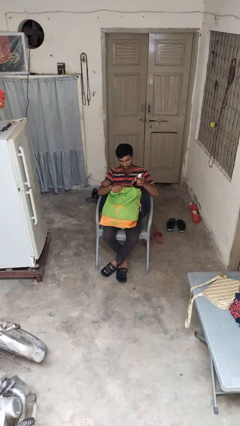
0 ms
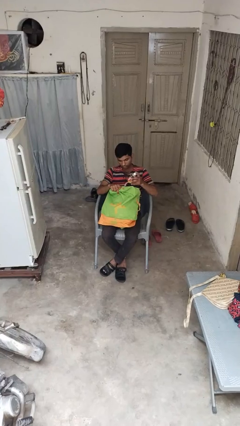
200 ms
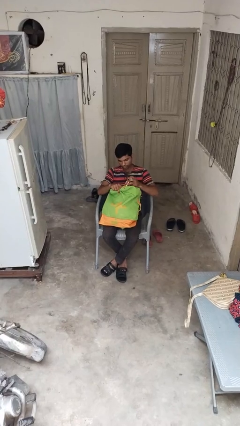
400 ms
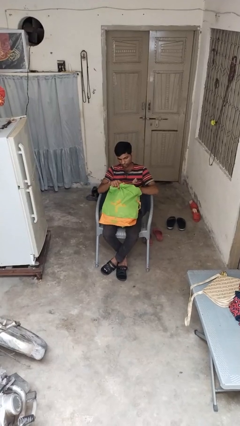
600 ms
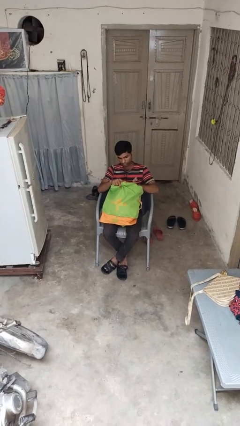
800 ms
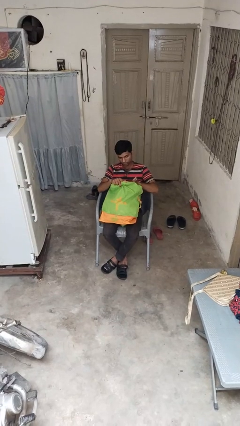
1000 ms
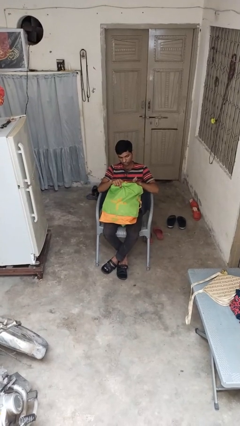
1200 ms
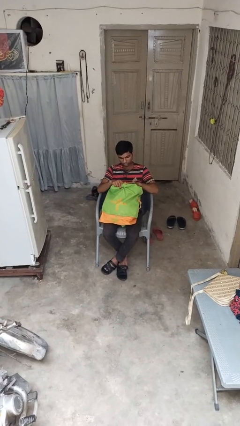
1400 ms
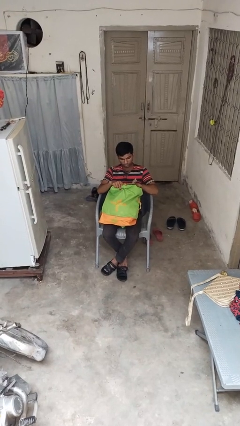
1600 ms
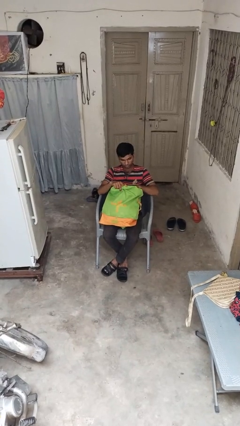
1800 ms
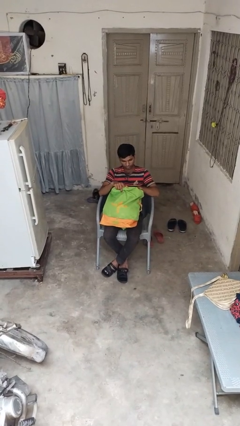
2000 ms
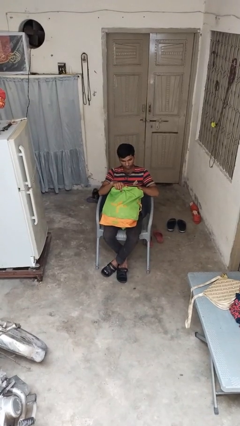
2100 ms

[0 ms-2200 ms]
person puts object into backpack

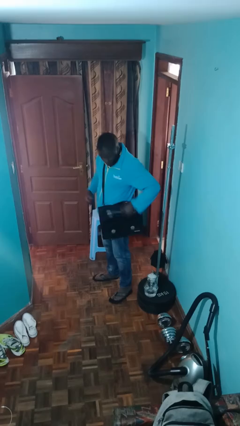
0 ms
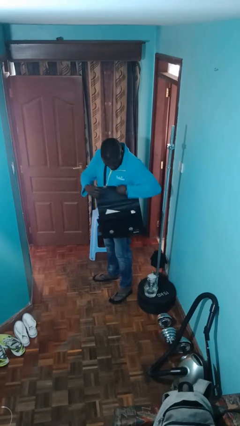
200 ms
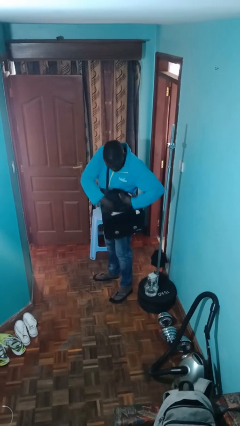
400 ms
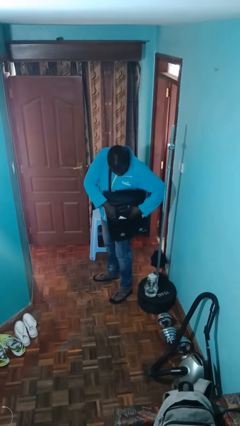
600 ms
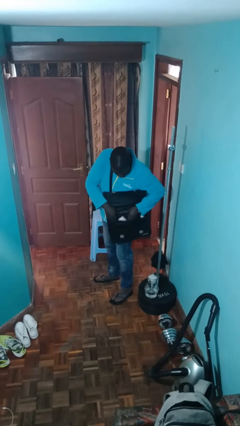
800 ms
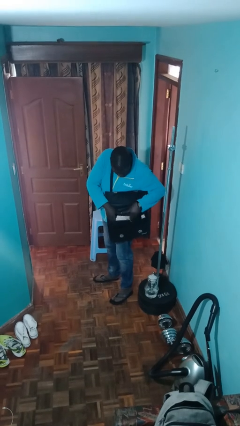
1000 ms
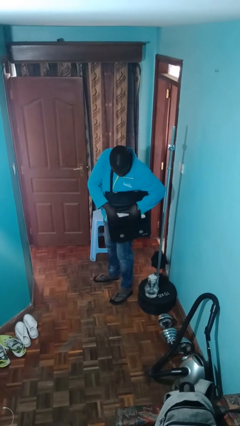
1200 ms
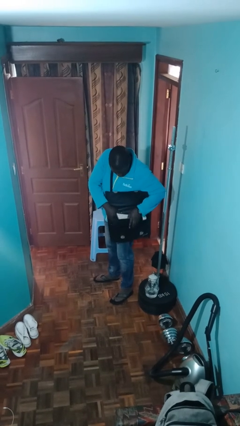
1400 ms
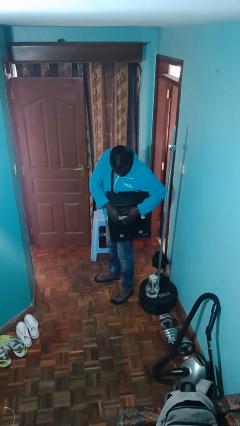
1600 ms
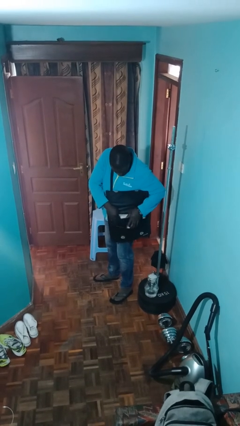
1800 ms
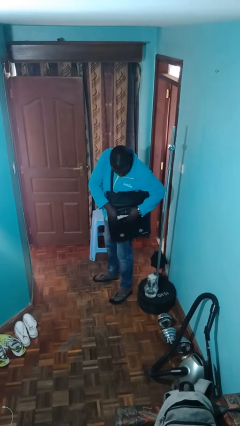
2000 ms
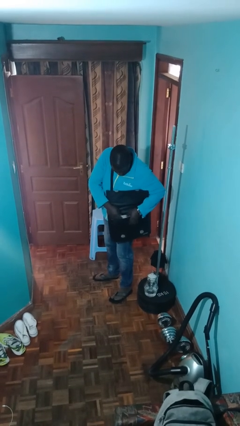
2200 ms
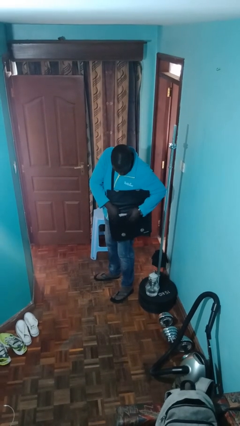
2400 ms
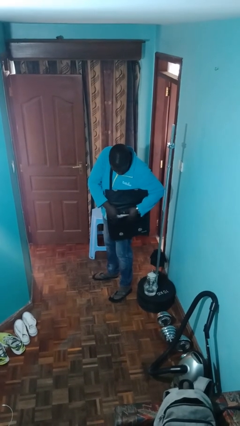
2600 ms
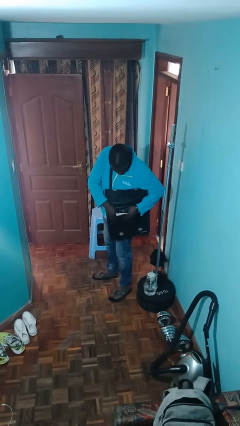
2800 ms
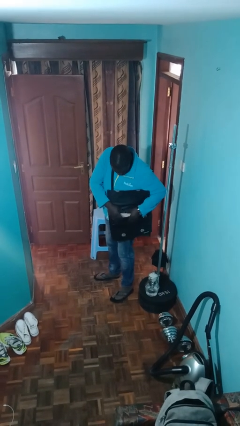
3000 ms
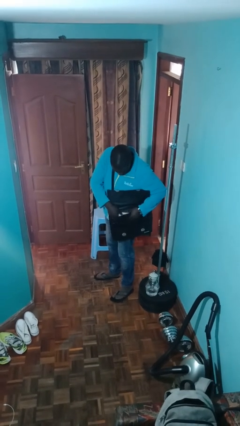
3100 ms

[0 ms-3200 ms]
person searches in purse

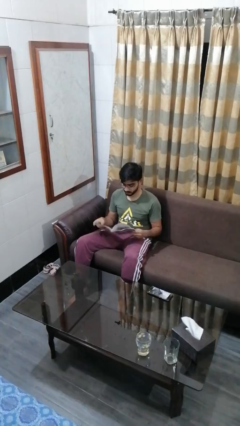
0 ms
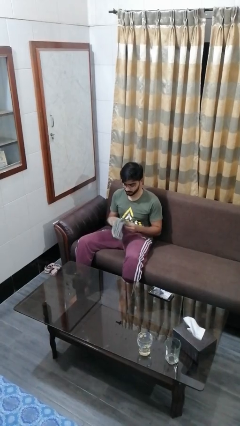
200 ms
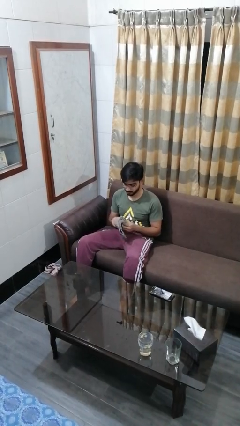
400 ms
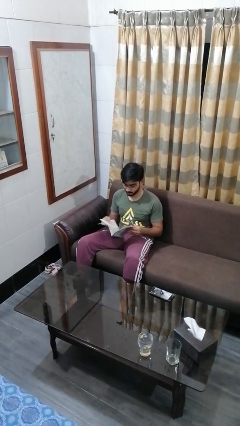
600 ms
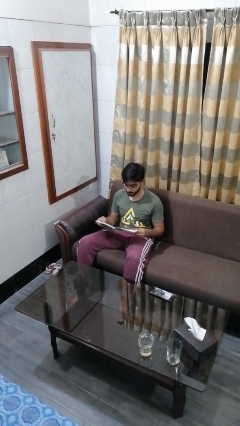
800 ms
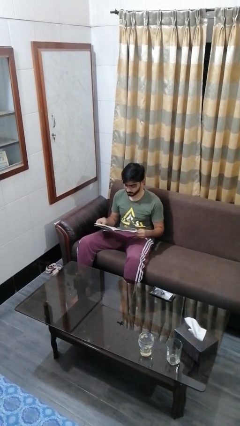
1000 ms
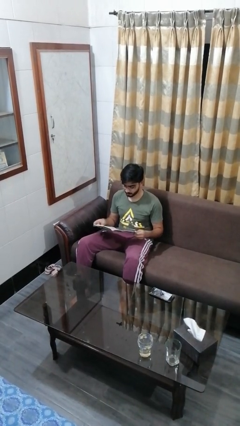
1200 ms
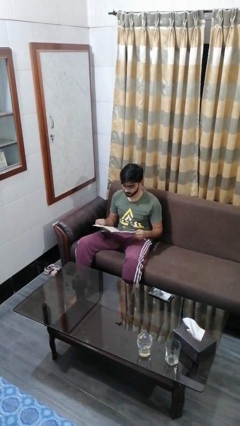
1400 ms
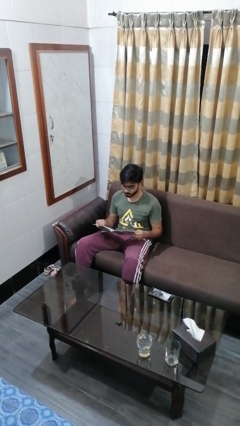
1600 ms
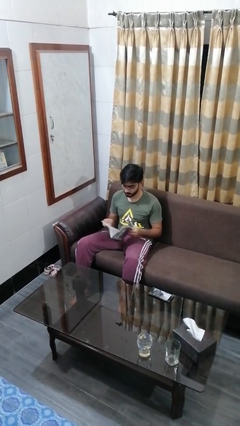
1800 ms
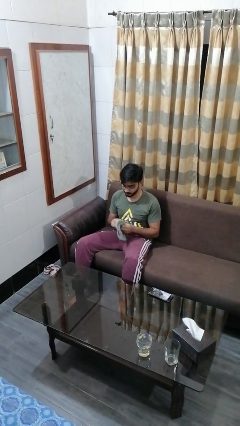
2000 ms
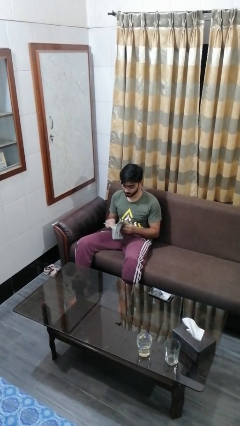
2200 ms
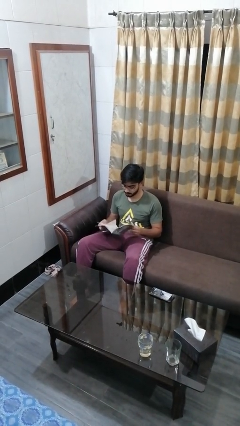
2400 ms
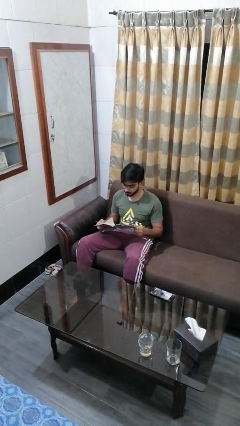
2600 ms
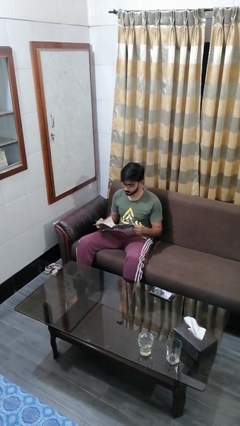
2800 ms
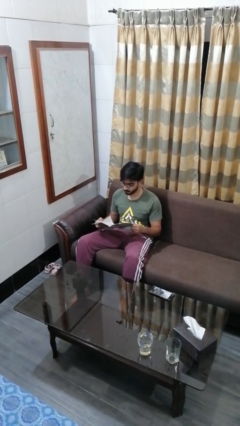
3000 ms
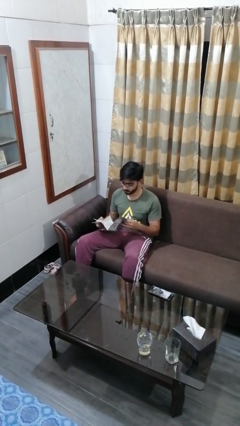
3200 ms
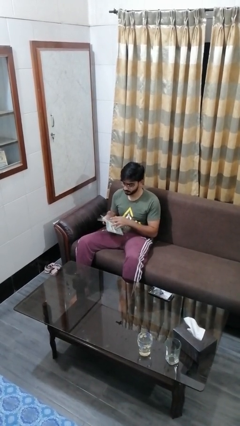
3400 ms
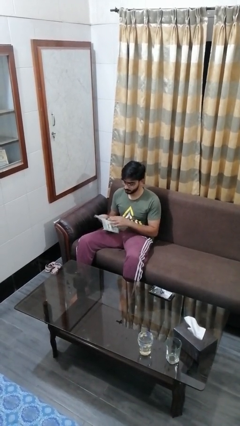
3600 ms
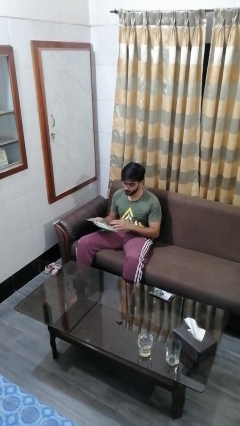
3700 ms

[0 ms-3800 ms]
person reads magazine

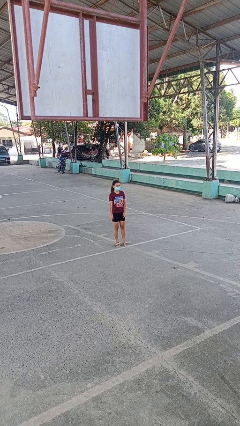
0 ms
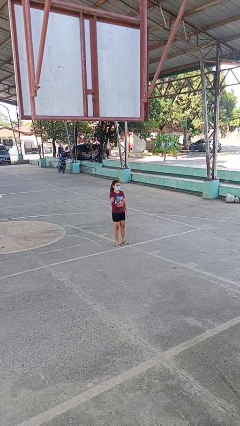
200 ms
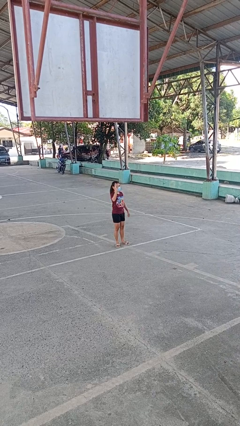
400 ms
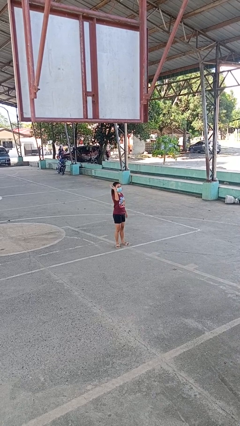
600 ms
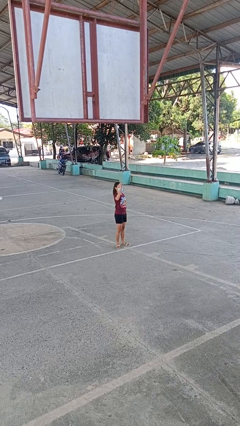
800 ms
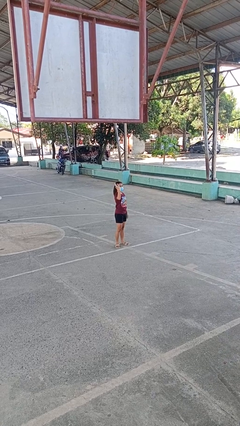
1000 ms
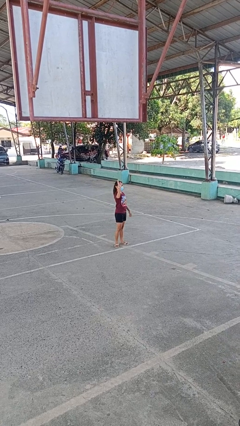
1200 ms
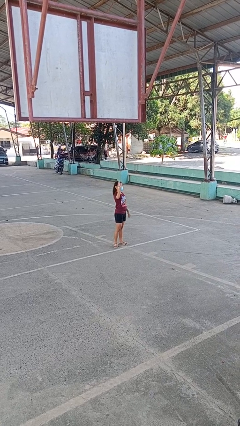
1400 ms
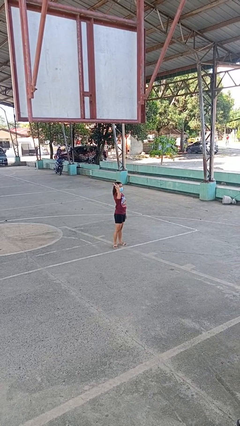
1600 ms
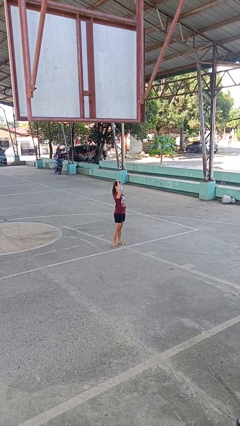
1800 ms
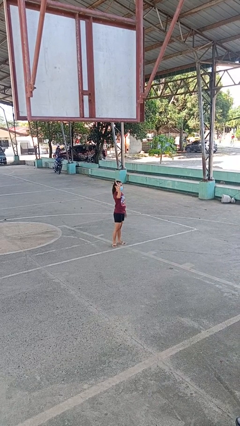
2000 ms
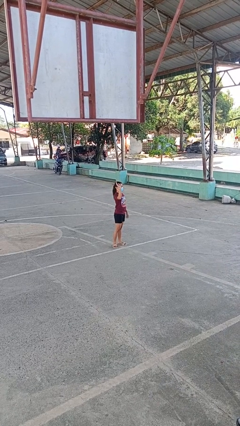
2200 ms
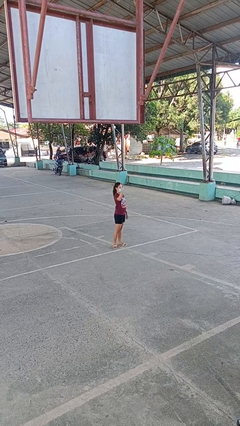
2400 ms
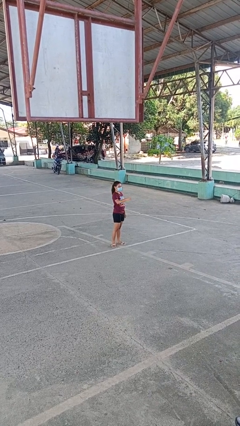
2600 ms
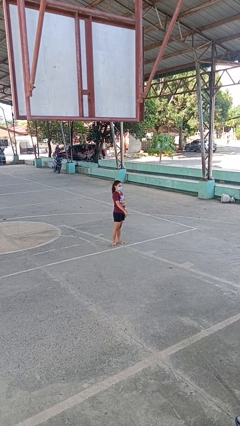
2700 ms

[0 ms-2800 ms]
person waves at person

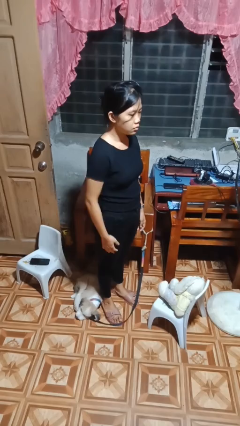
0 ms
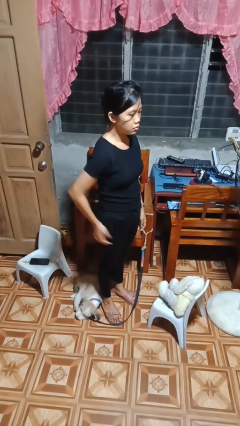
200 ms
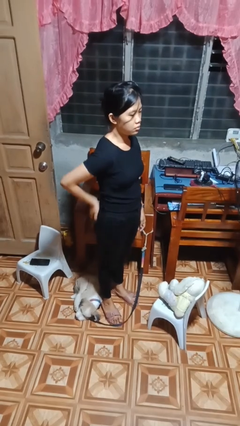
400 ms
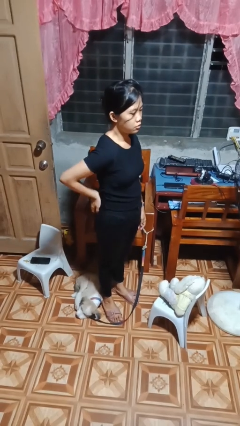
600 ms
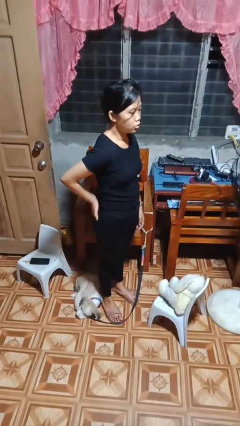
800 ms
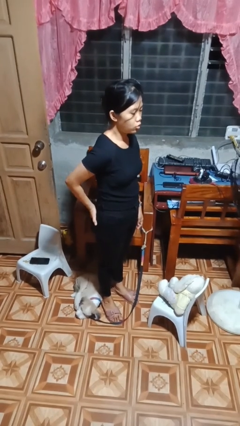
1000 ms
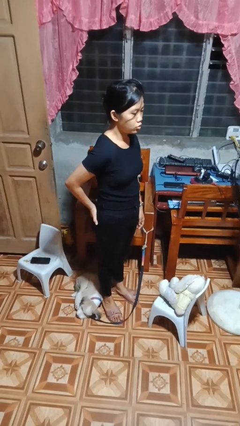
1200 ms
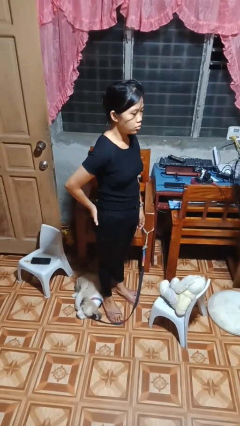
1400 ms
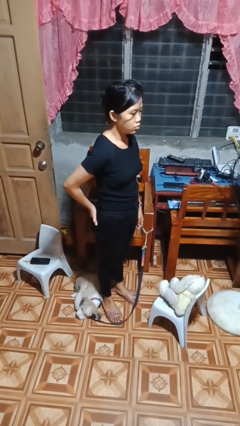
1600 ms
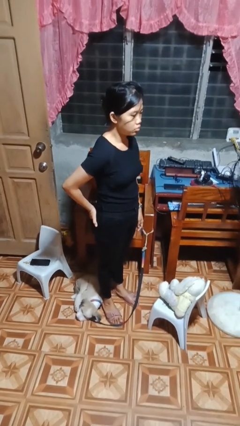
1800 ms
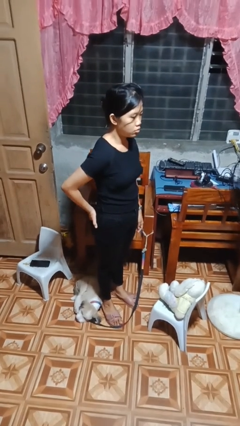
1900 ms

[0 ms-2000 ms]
person puts hands in back pockets

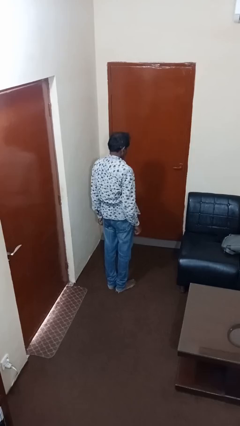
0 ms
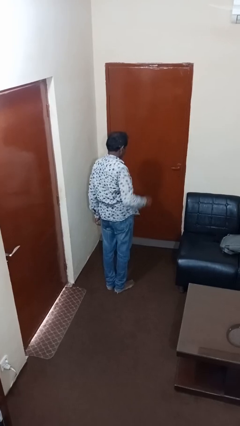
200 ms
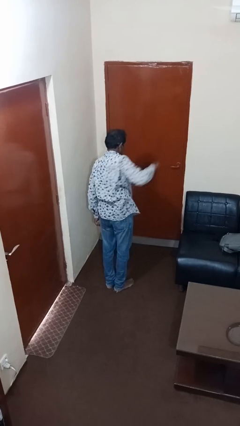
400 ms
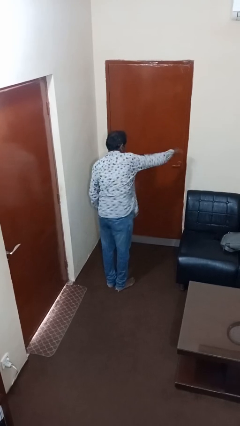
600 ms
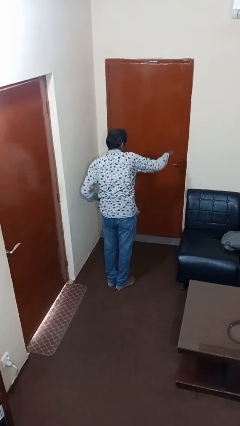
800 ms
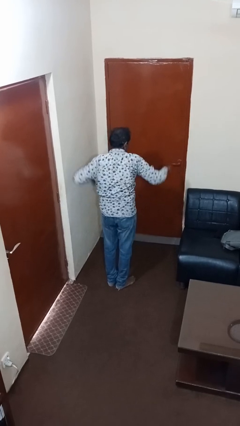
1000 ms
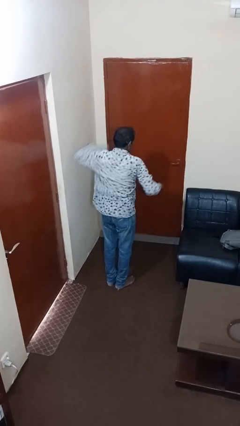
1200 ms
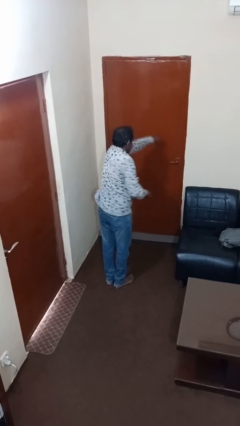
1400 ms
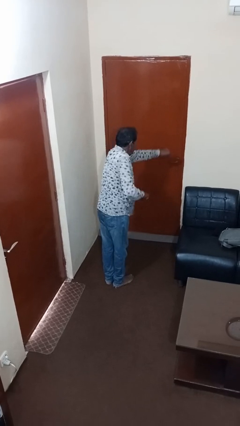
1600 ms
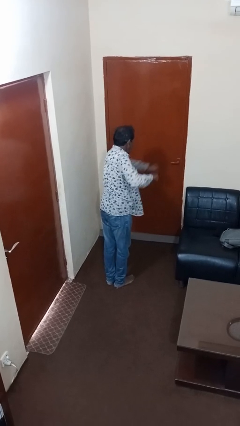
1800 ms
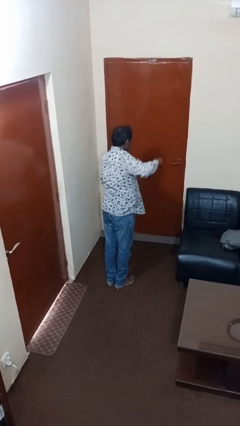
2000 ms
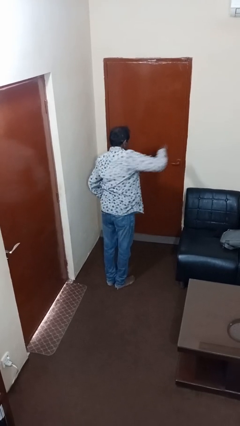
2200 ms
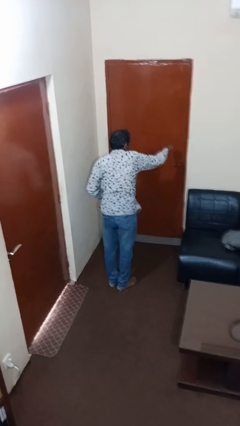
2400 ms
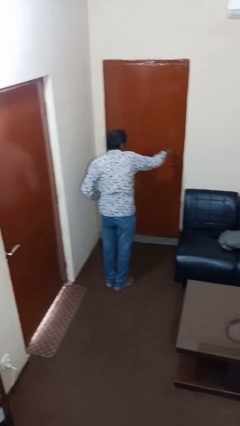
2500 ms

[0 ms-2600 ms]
person punches

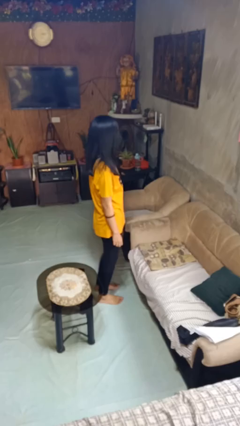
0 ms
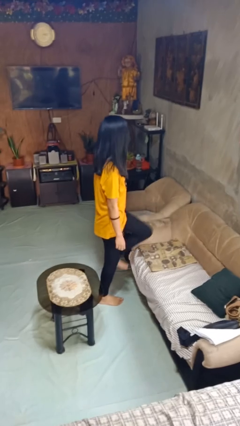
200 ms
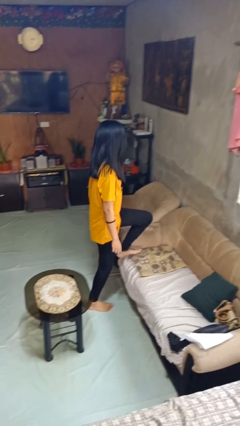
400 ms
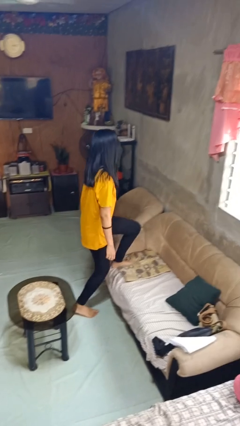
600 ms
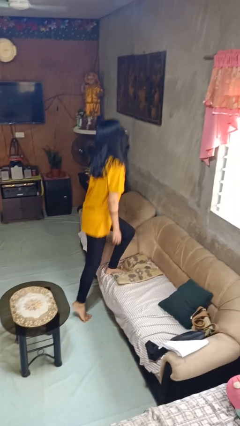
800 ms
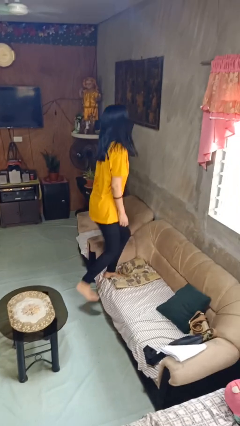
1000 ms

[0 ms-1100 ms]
person climbs on couch
